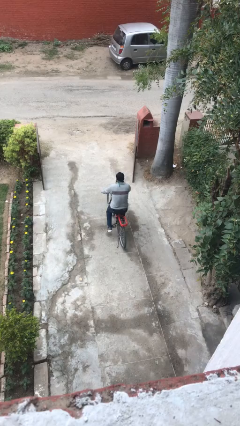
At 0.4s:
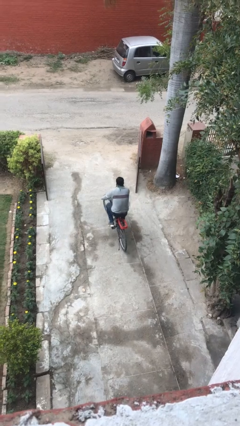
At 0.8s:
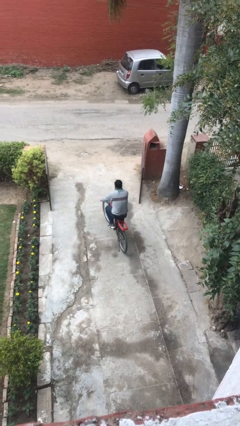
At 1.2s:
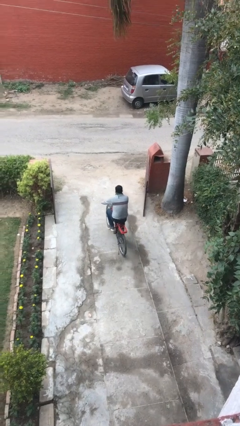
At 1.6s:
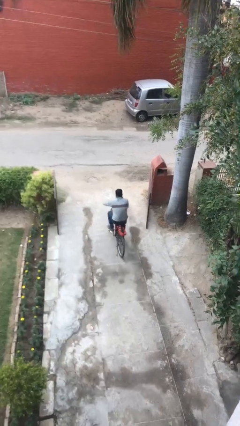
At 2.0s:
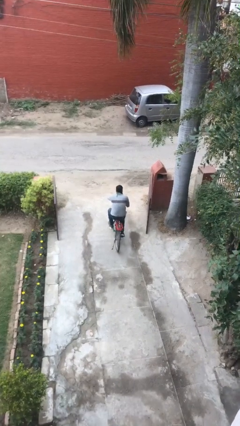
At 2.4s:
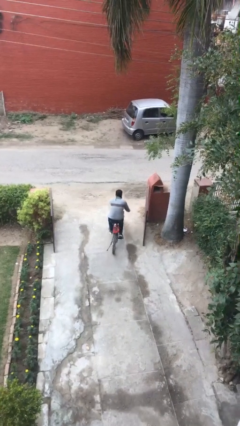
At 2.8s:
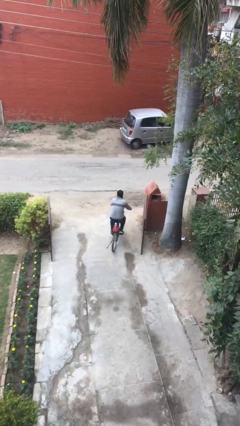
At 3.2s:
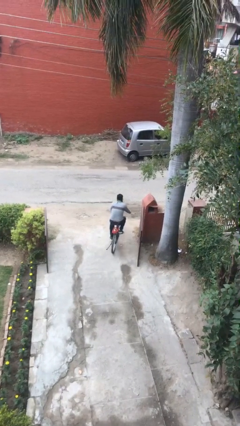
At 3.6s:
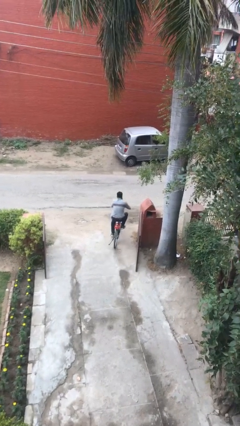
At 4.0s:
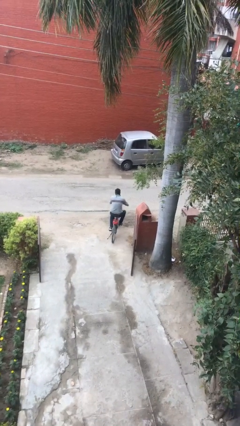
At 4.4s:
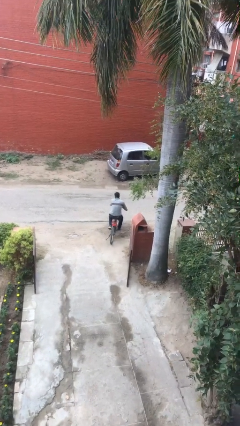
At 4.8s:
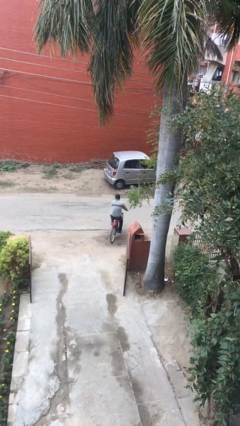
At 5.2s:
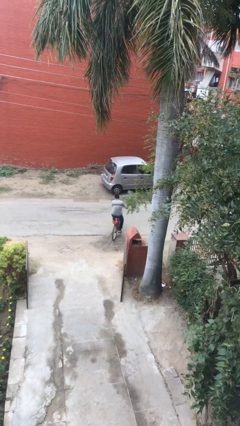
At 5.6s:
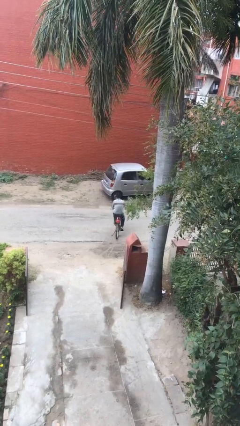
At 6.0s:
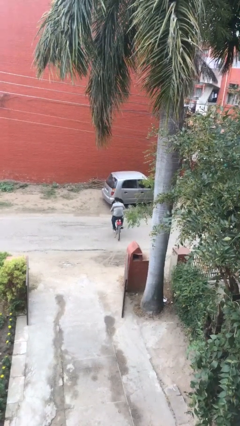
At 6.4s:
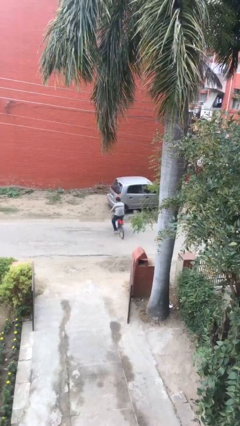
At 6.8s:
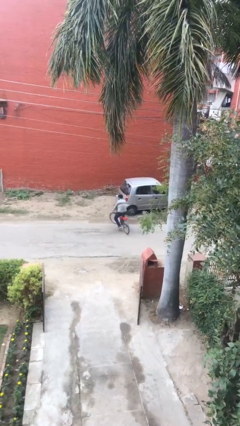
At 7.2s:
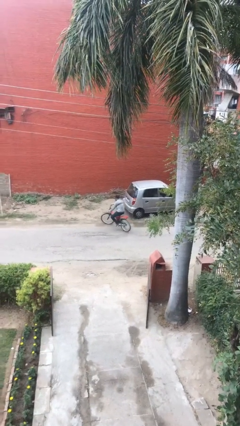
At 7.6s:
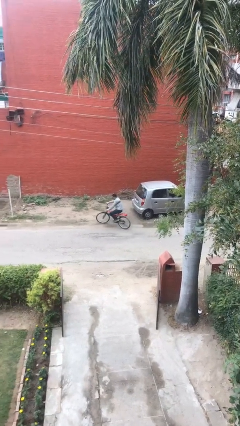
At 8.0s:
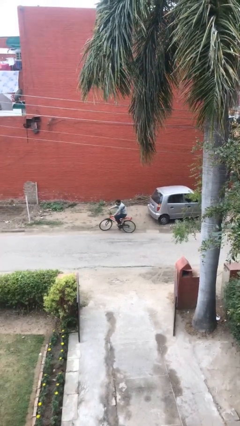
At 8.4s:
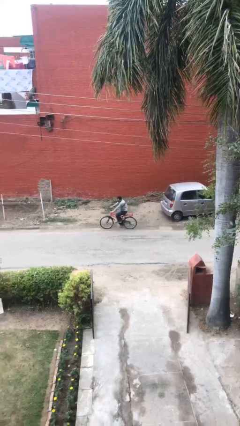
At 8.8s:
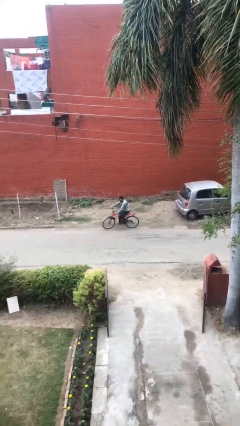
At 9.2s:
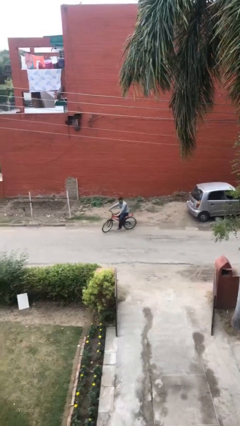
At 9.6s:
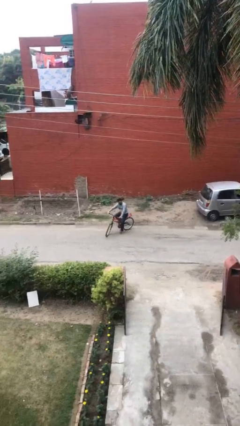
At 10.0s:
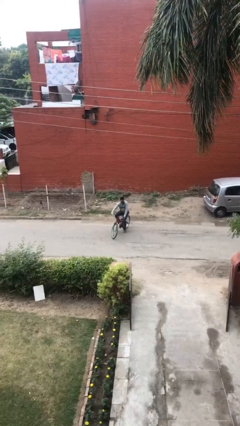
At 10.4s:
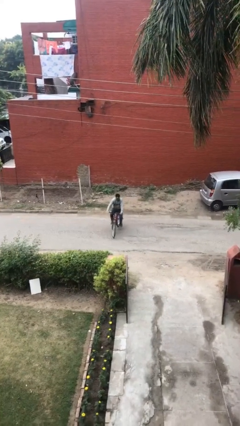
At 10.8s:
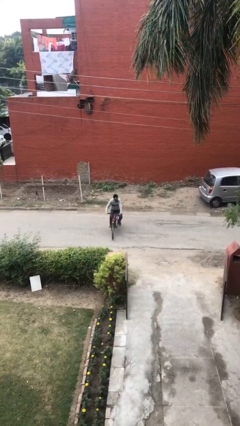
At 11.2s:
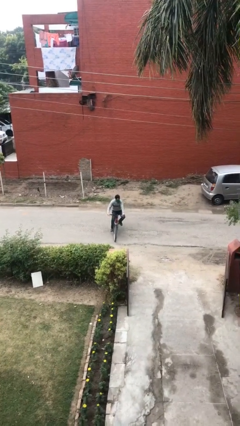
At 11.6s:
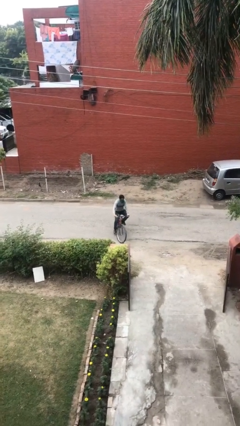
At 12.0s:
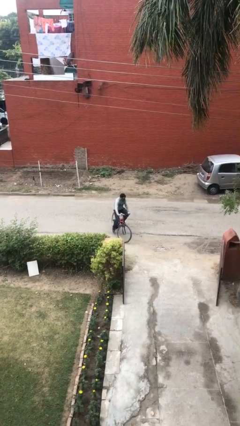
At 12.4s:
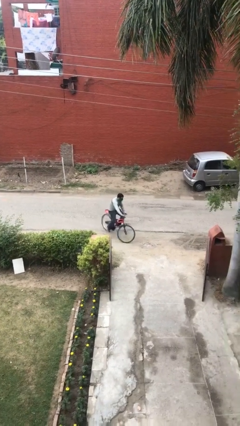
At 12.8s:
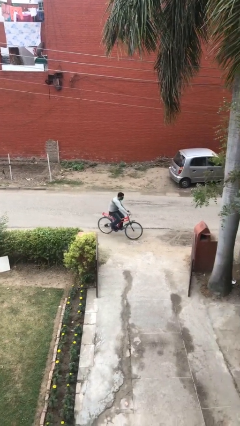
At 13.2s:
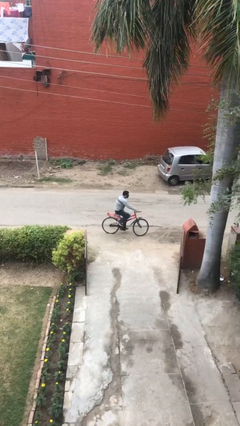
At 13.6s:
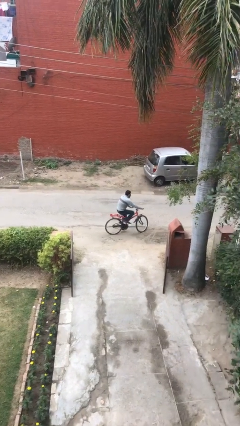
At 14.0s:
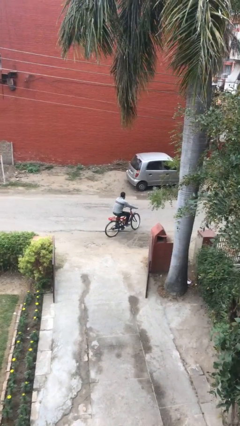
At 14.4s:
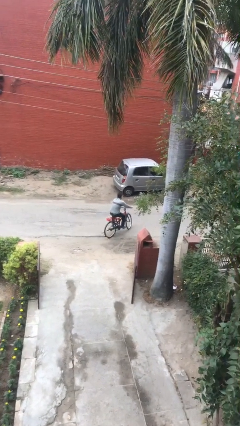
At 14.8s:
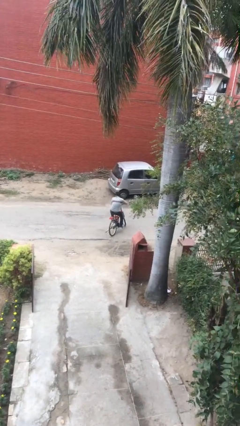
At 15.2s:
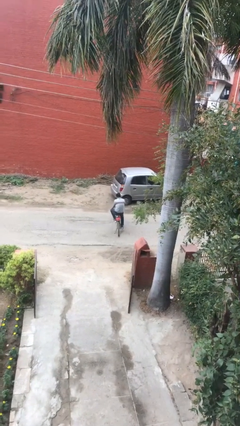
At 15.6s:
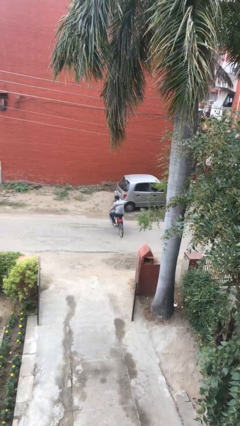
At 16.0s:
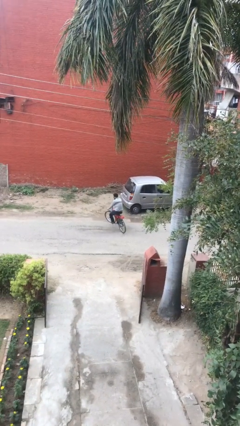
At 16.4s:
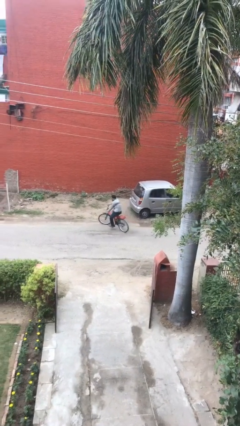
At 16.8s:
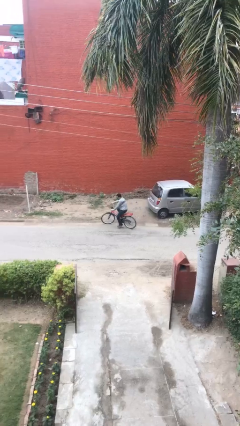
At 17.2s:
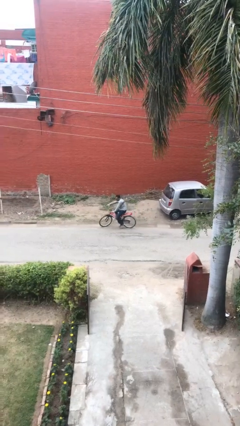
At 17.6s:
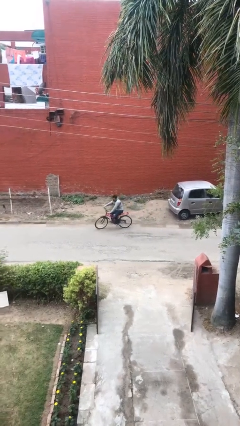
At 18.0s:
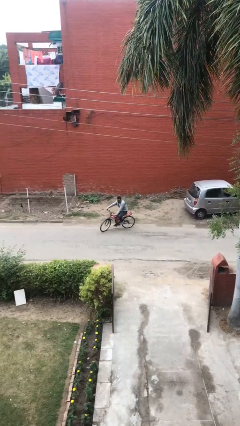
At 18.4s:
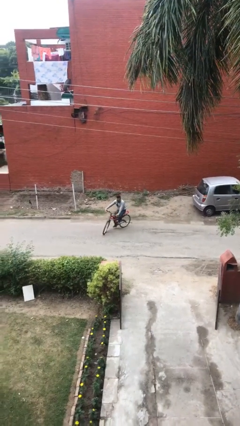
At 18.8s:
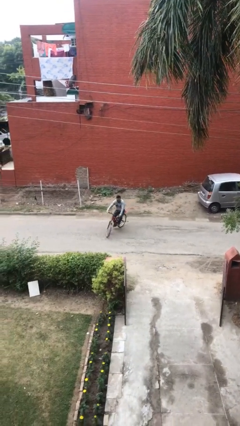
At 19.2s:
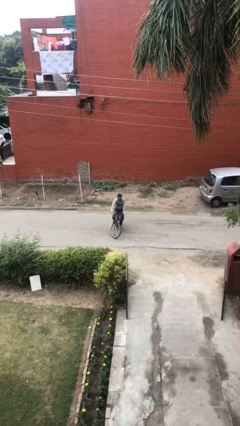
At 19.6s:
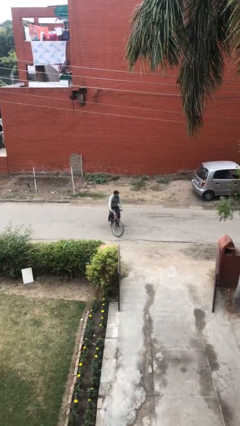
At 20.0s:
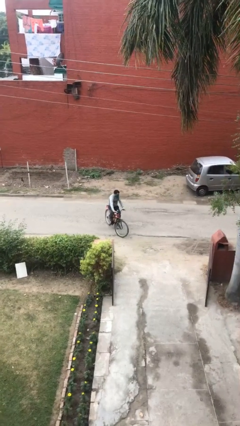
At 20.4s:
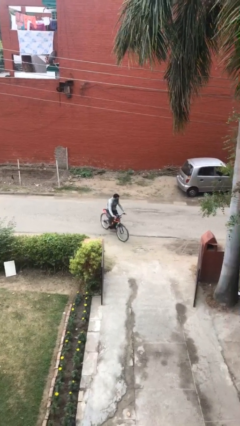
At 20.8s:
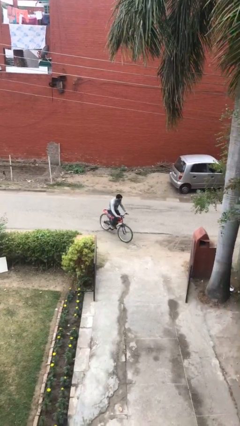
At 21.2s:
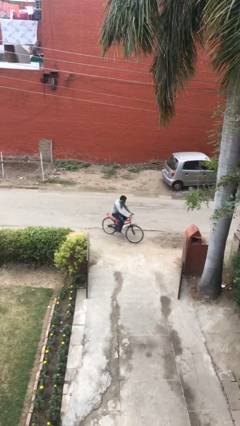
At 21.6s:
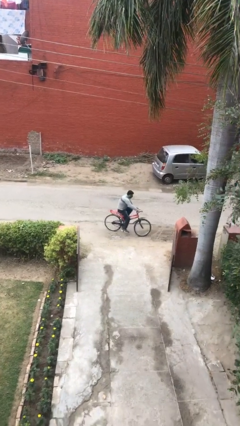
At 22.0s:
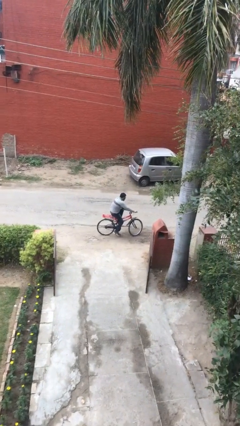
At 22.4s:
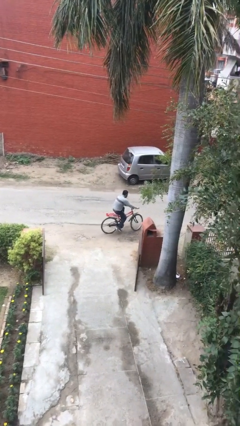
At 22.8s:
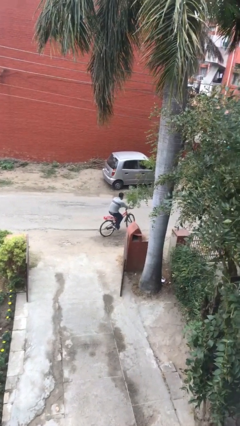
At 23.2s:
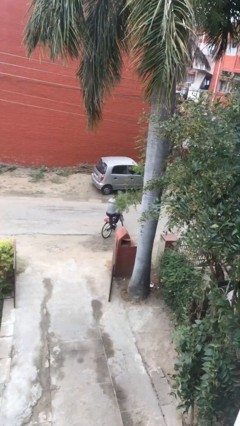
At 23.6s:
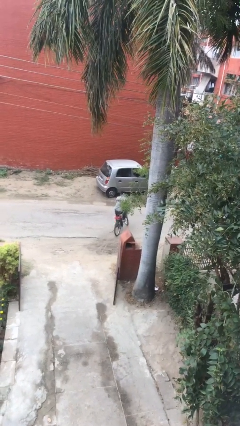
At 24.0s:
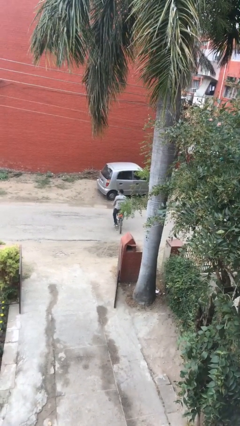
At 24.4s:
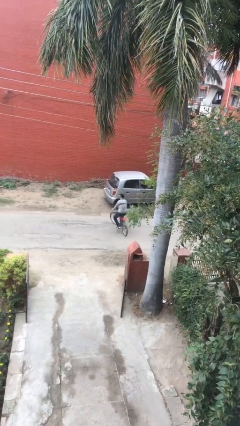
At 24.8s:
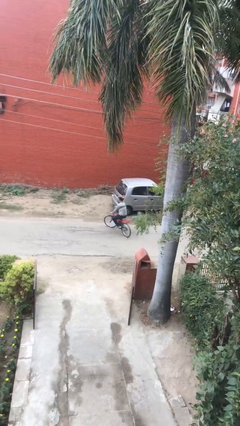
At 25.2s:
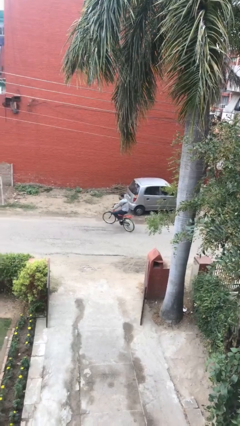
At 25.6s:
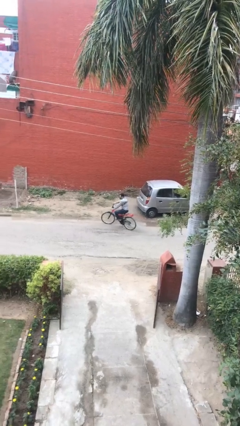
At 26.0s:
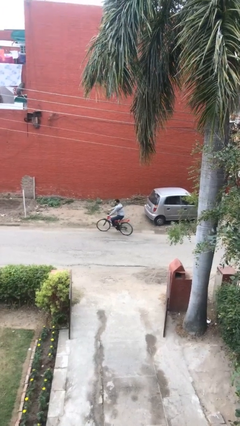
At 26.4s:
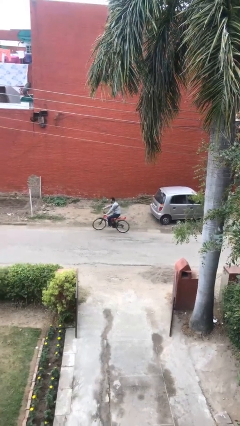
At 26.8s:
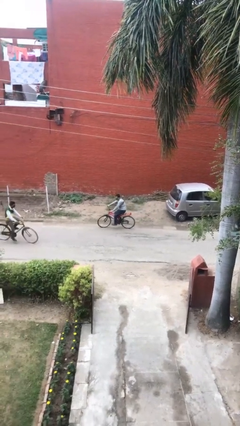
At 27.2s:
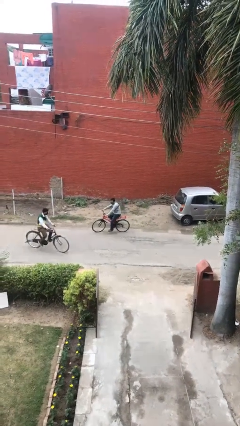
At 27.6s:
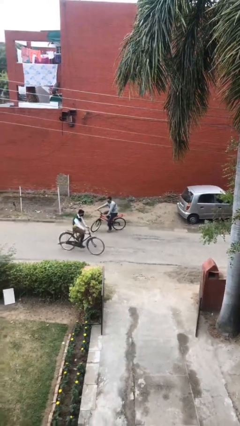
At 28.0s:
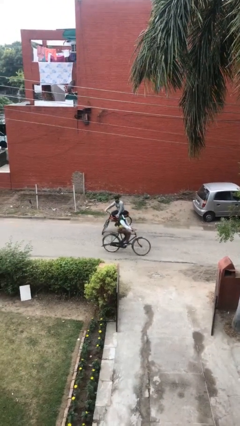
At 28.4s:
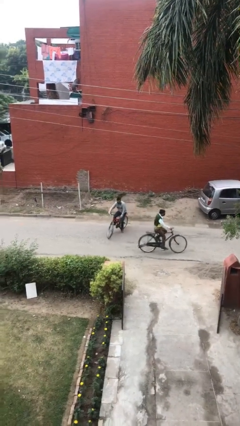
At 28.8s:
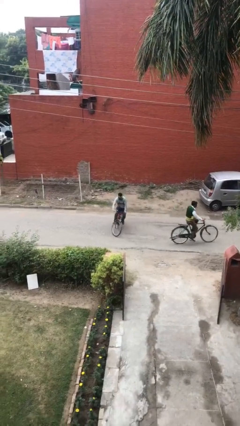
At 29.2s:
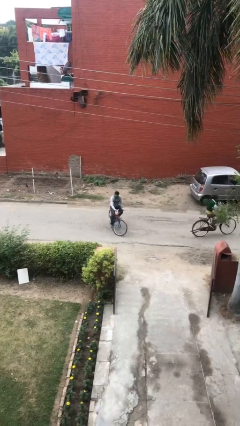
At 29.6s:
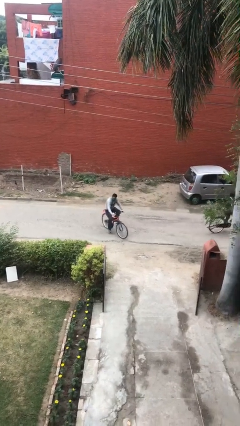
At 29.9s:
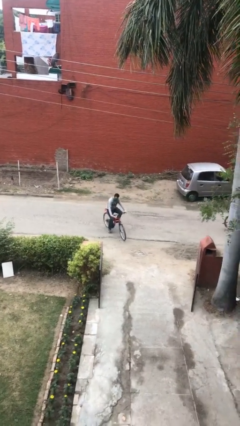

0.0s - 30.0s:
person rides bicycle

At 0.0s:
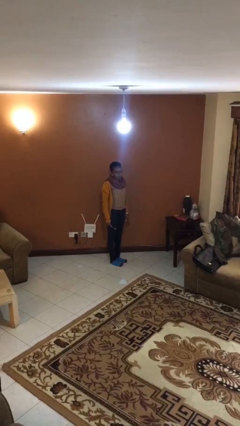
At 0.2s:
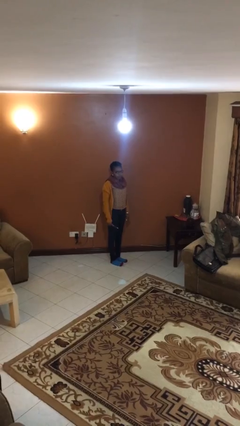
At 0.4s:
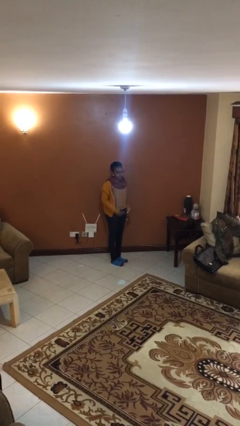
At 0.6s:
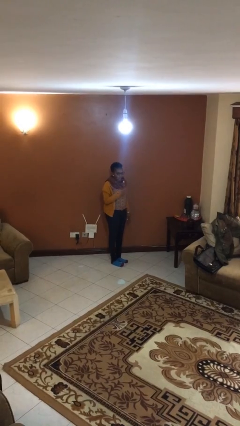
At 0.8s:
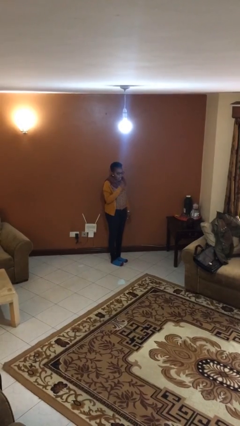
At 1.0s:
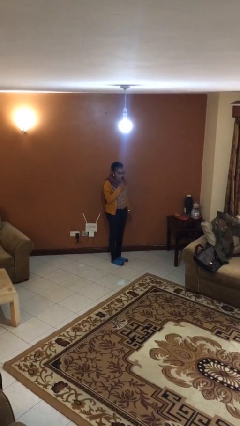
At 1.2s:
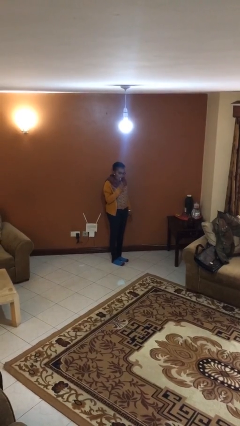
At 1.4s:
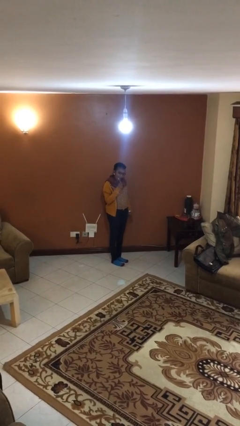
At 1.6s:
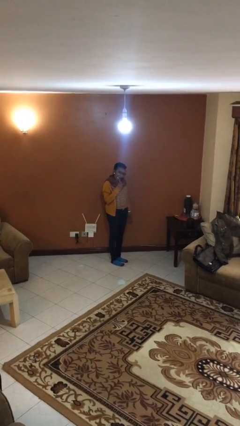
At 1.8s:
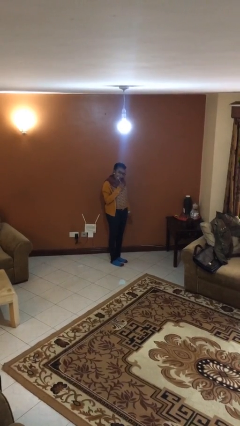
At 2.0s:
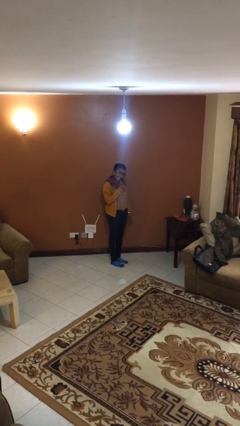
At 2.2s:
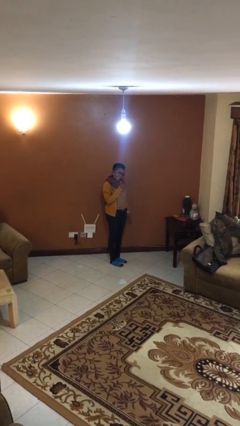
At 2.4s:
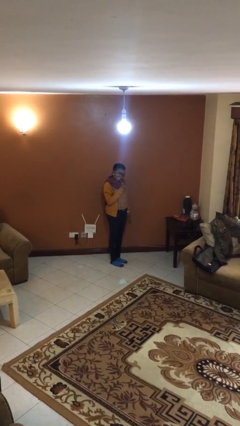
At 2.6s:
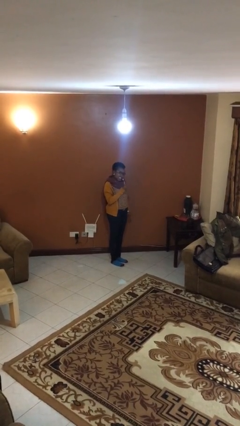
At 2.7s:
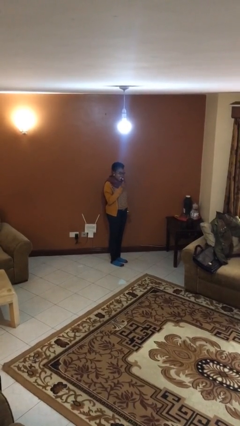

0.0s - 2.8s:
person brushes teeth

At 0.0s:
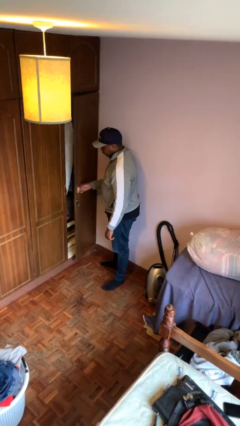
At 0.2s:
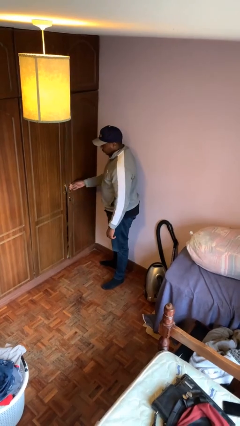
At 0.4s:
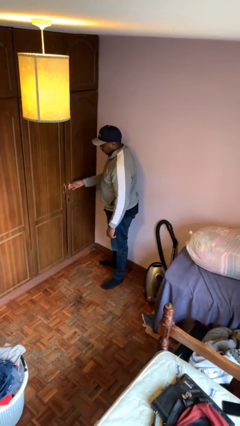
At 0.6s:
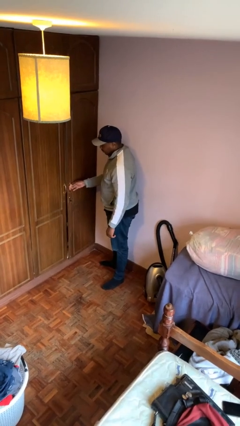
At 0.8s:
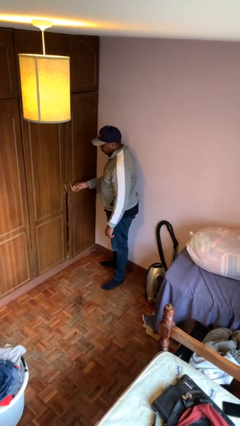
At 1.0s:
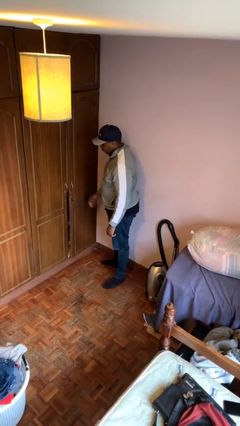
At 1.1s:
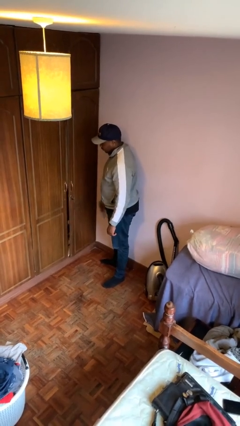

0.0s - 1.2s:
person closes closet door
